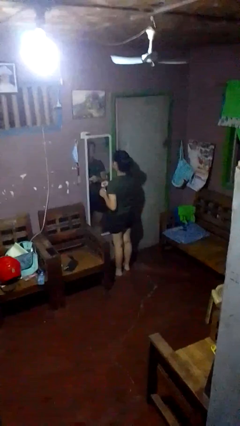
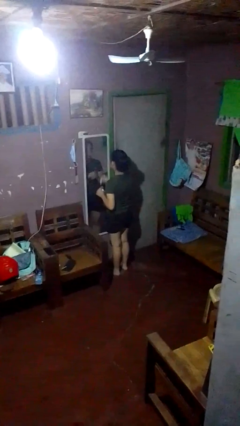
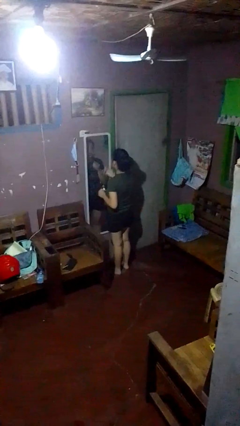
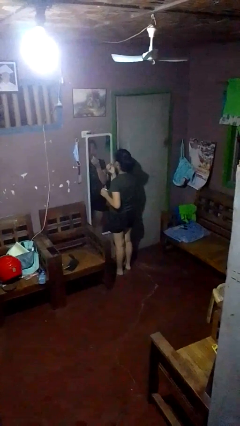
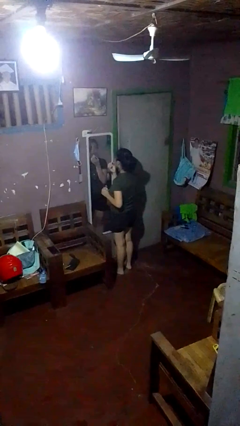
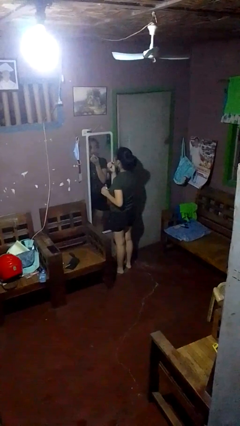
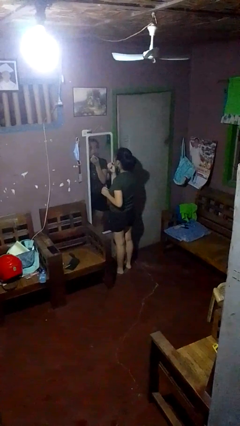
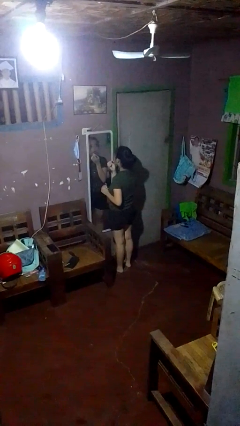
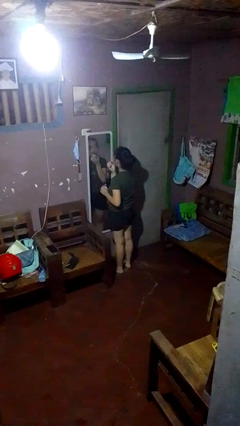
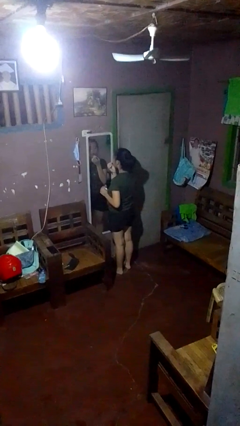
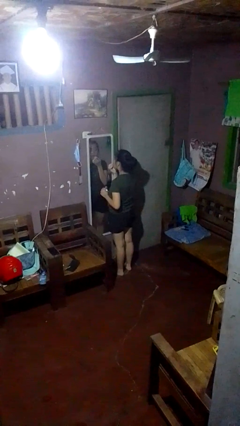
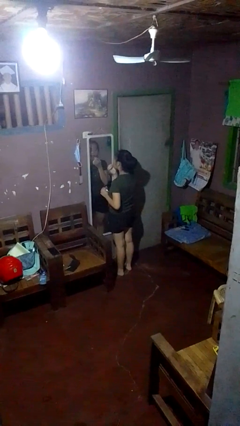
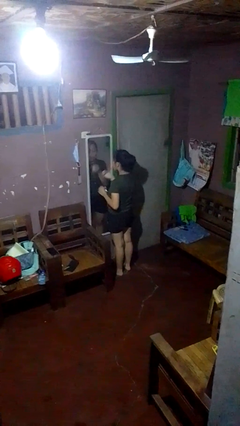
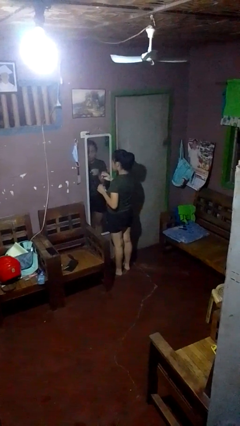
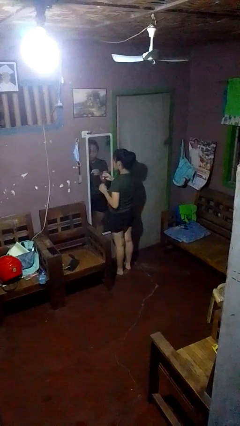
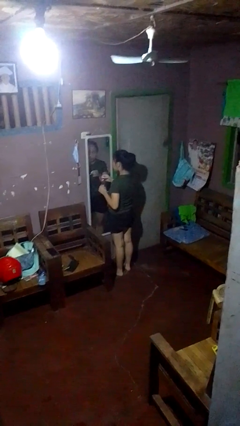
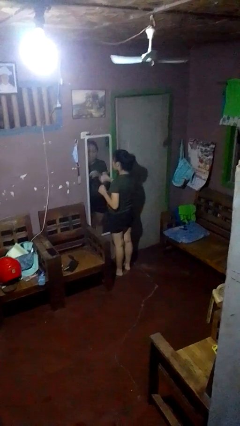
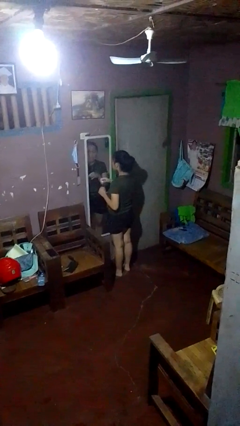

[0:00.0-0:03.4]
person applies lip makeup

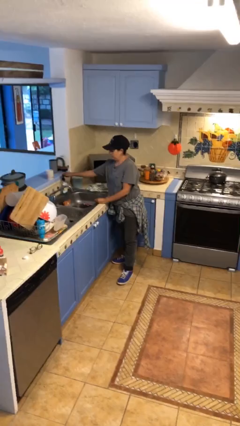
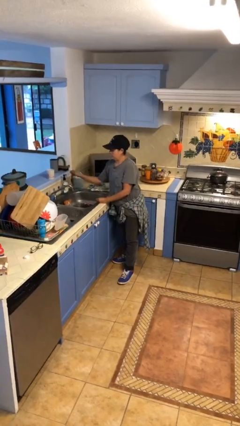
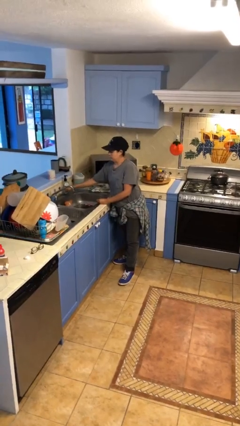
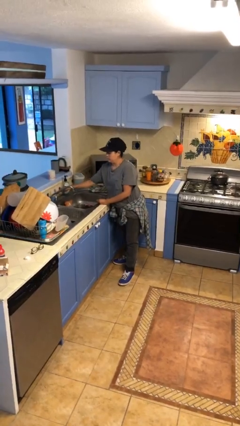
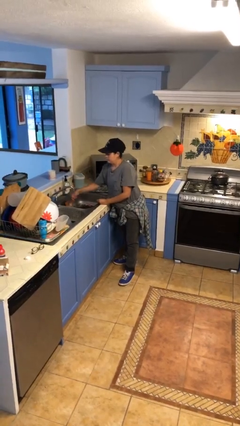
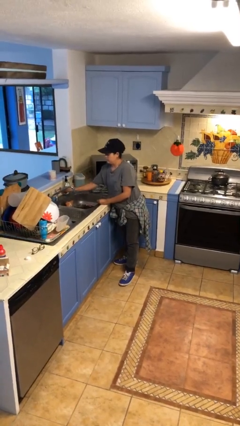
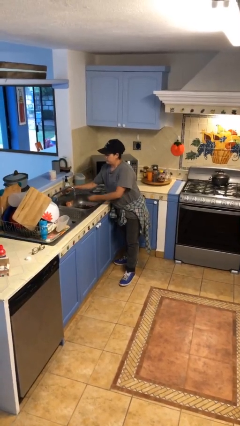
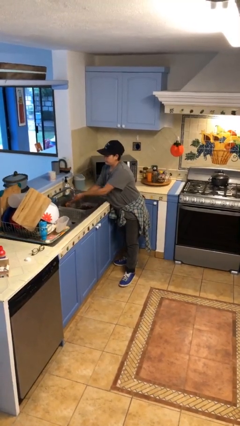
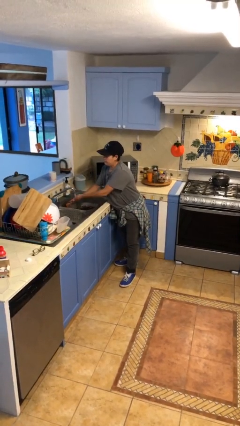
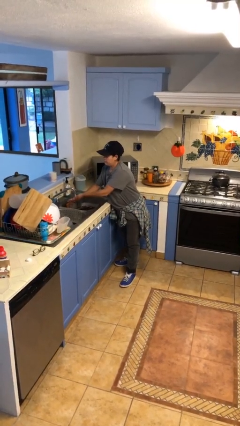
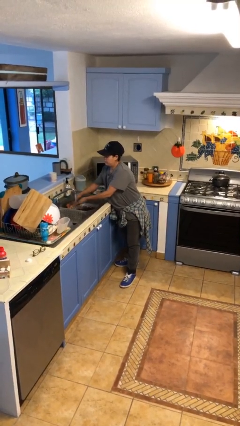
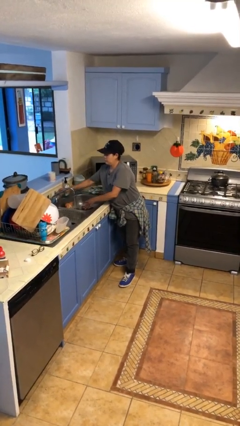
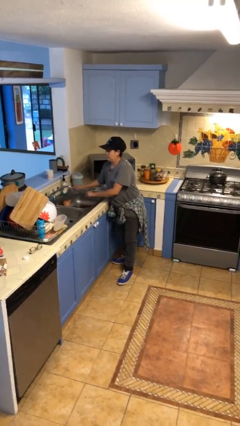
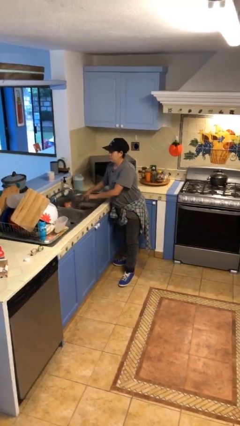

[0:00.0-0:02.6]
person washes hands

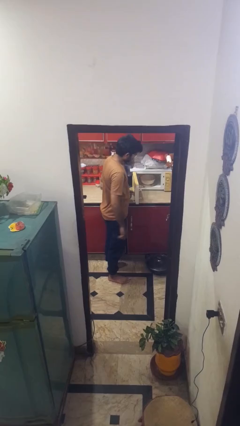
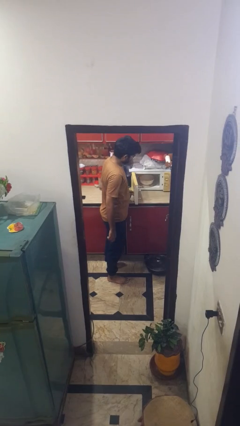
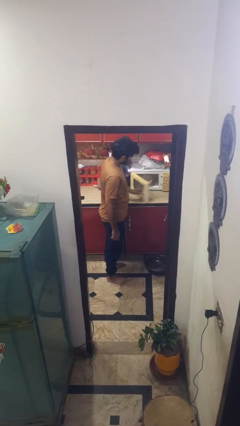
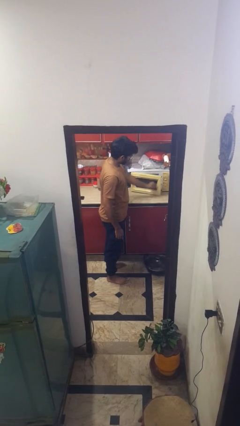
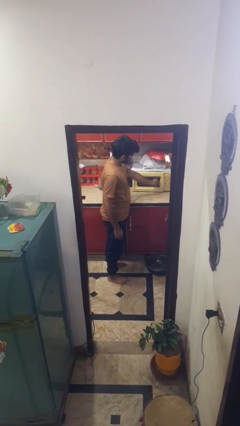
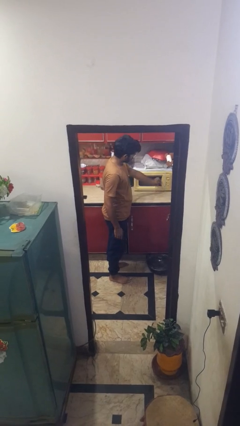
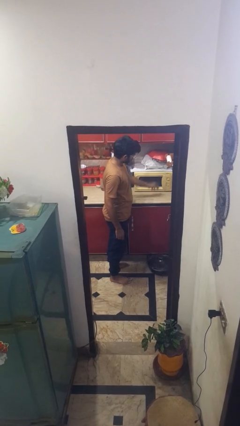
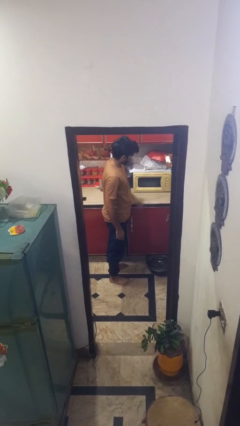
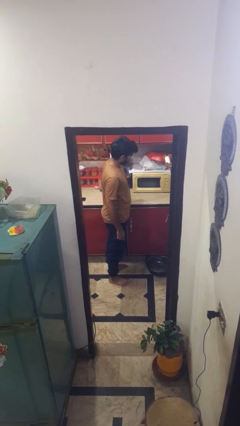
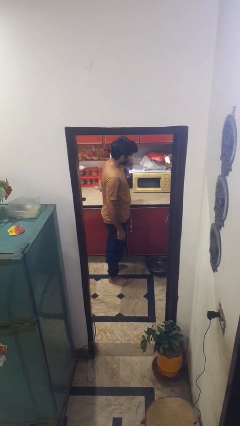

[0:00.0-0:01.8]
person closes microwave

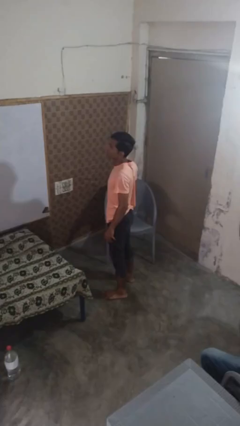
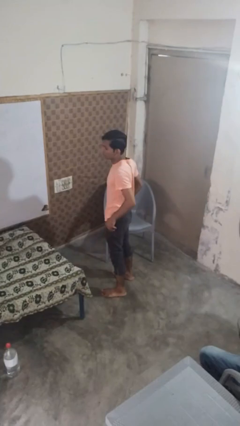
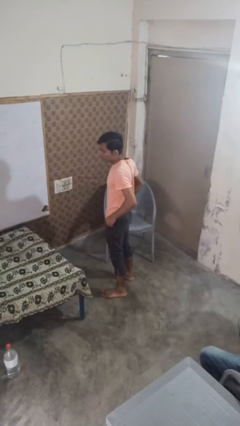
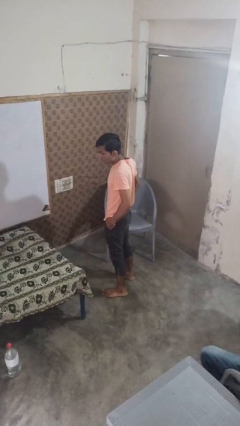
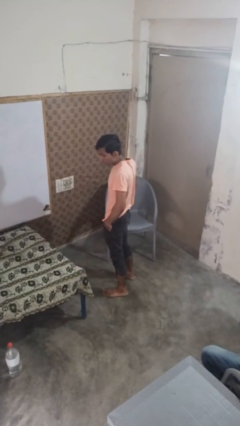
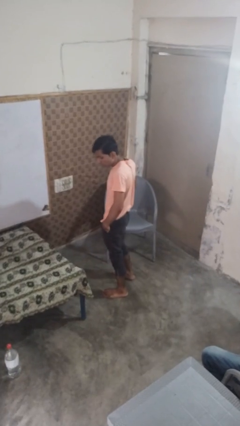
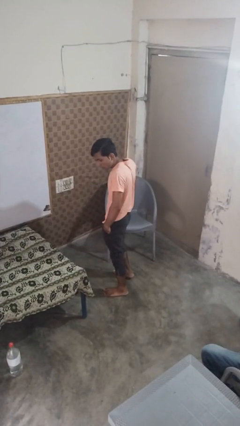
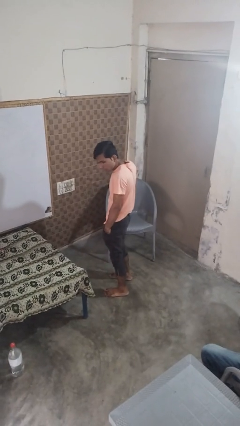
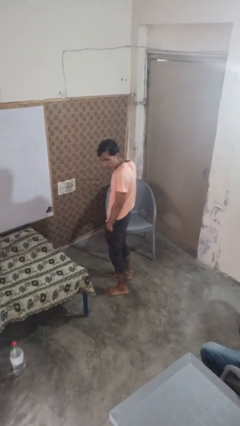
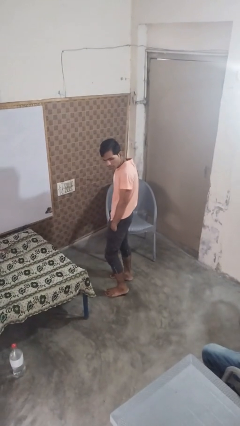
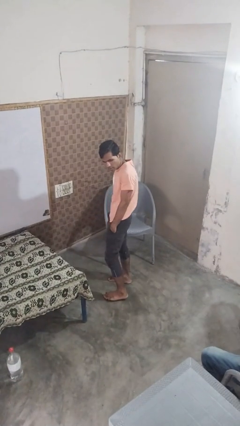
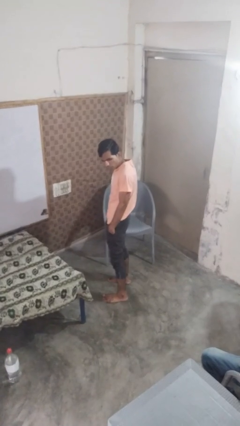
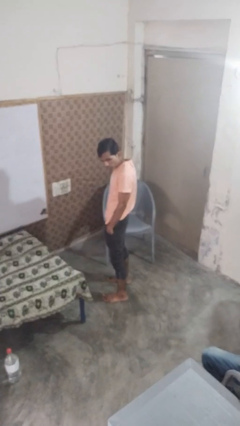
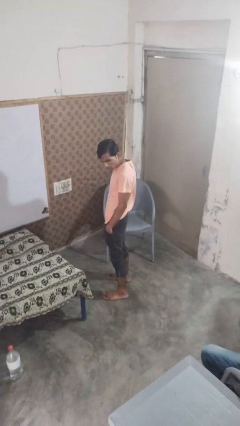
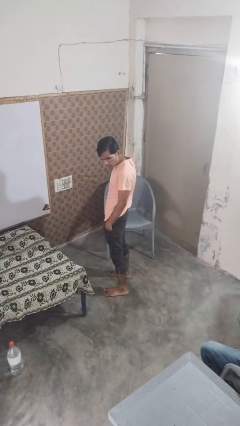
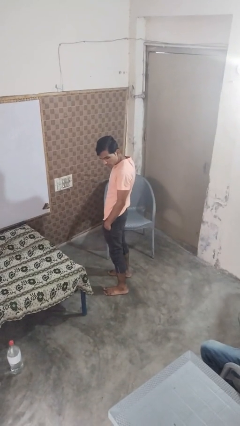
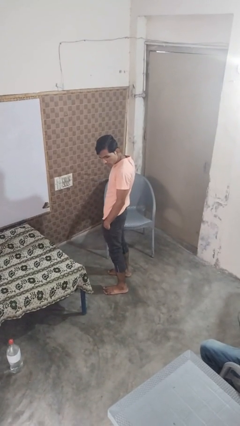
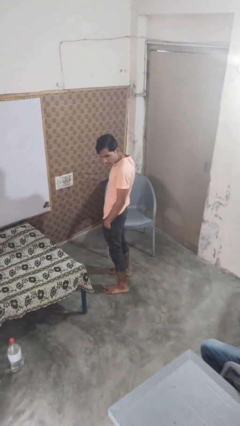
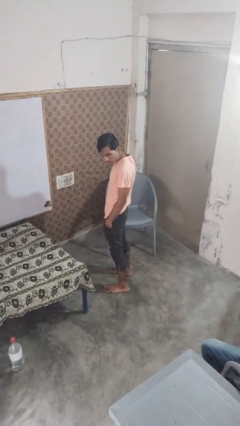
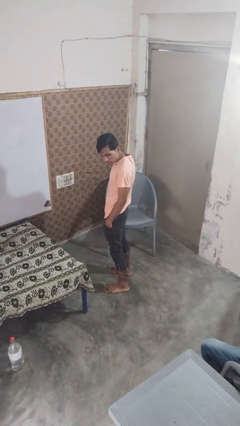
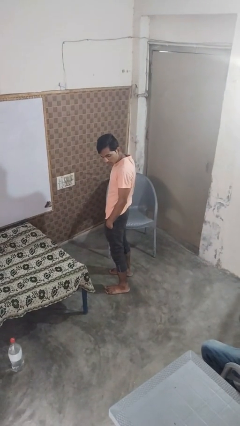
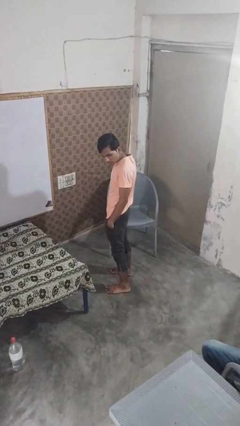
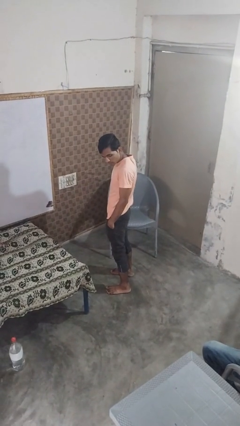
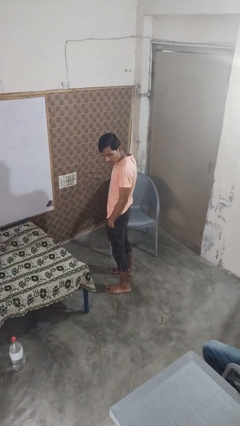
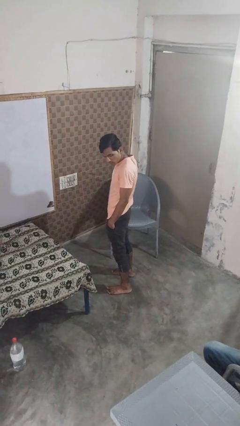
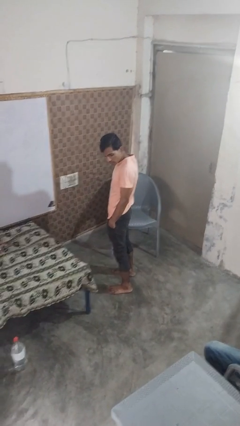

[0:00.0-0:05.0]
person puts hands in back pockets

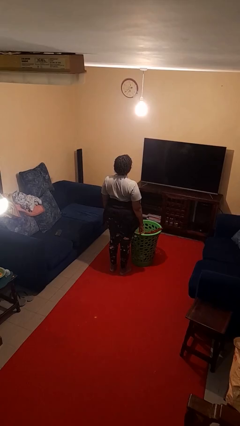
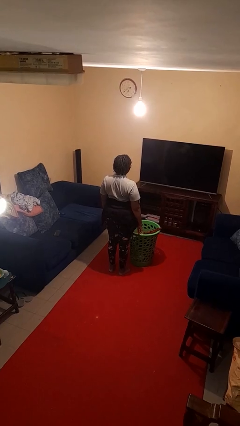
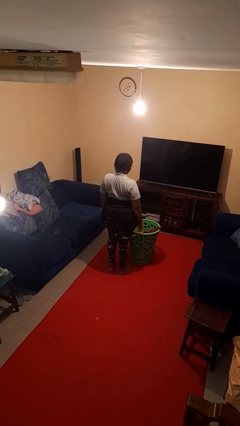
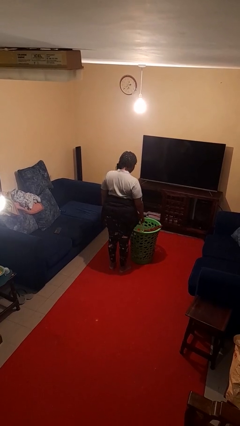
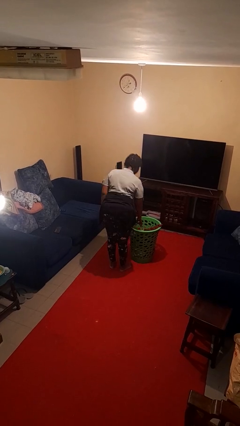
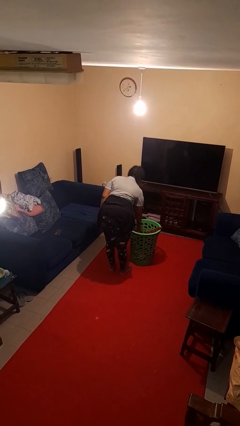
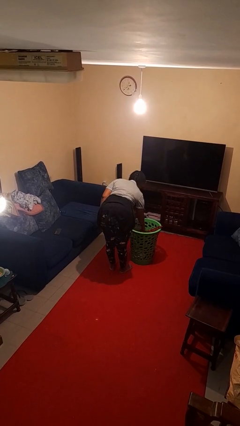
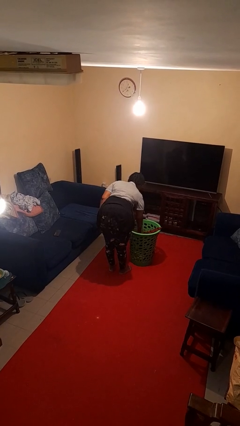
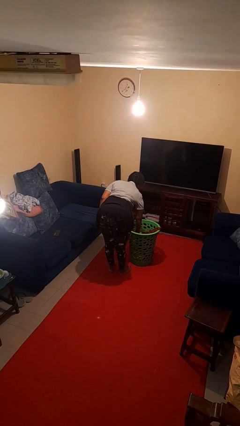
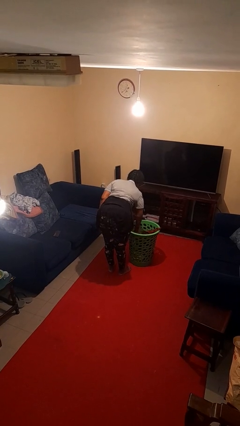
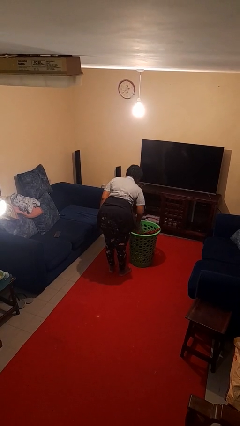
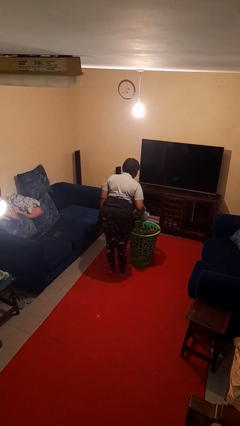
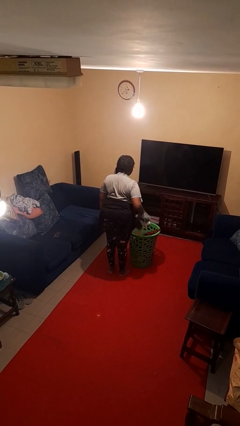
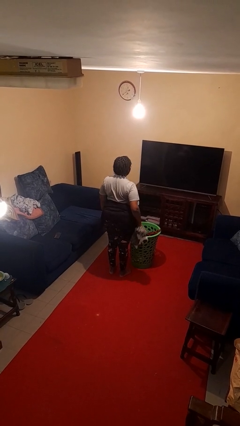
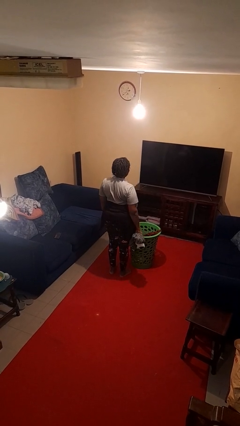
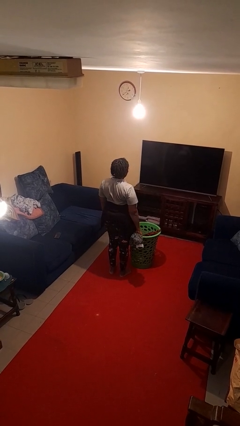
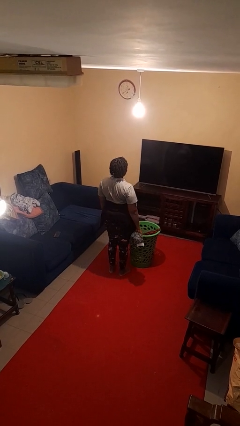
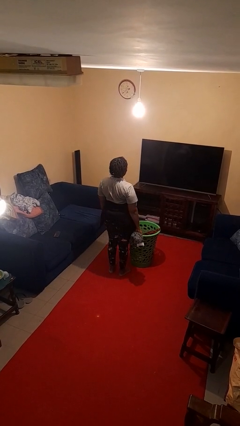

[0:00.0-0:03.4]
person takes object from basket

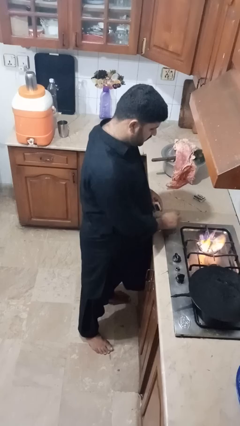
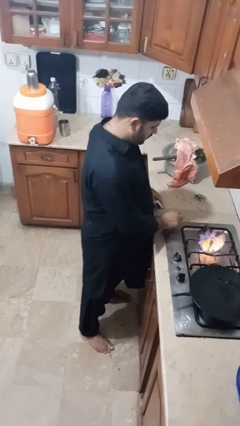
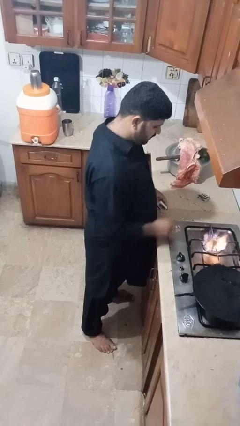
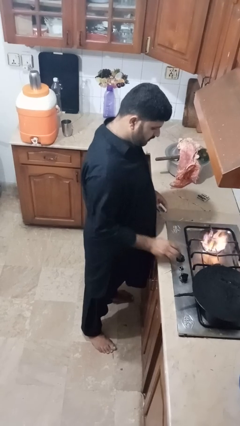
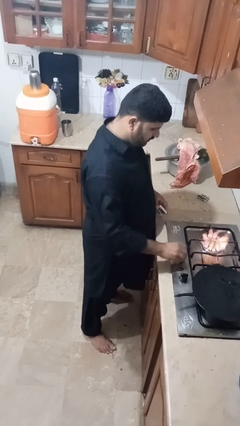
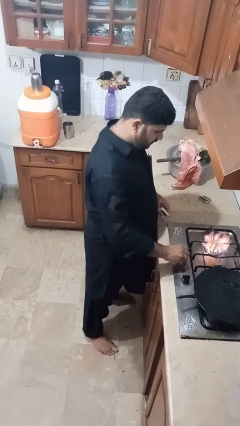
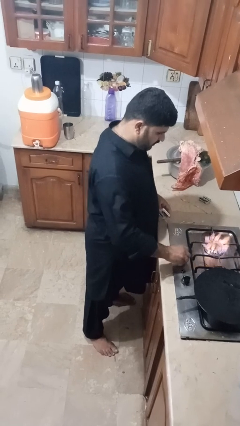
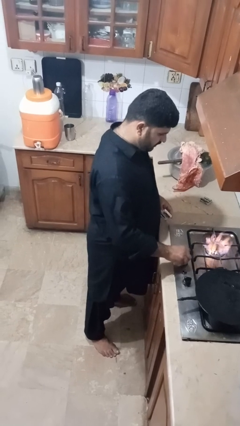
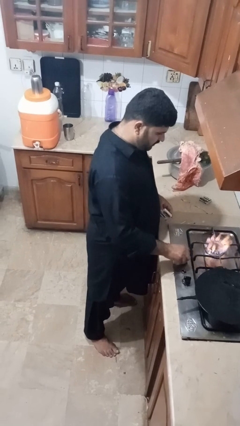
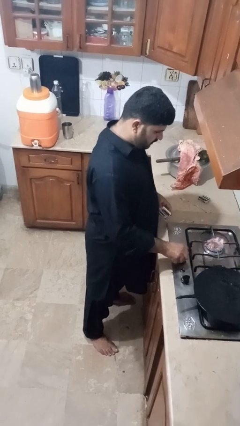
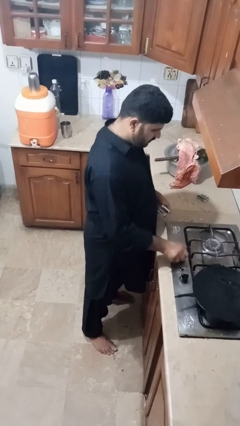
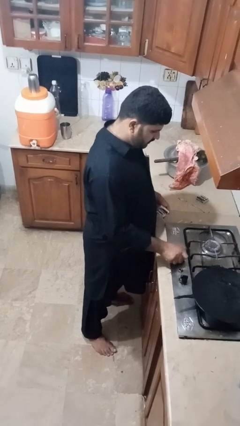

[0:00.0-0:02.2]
person turns off stovetop
